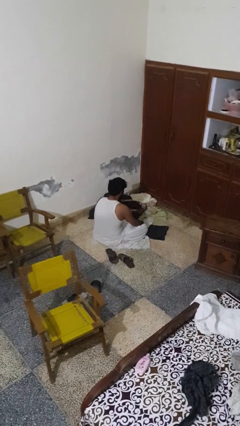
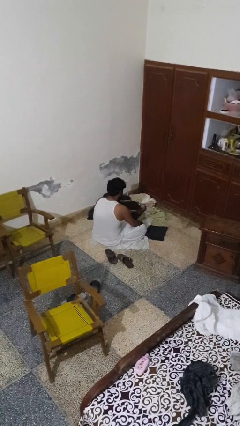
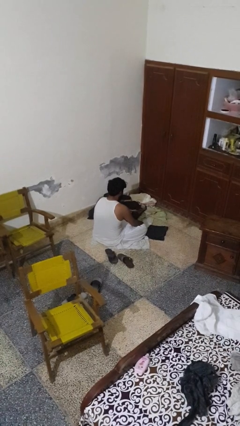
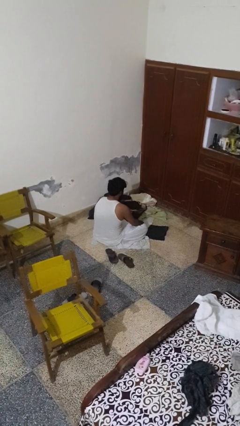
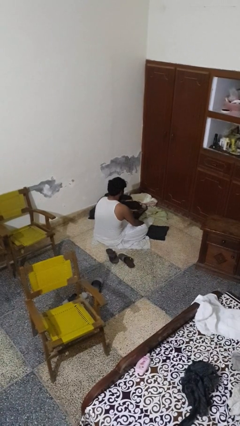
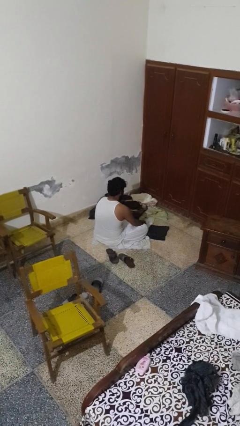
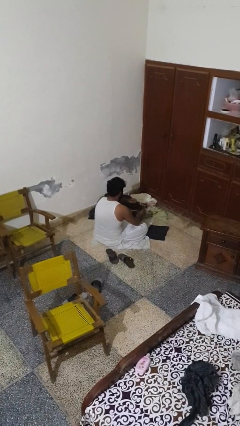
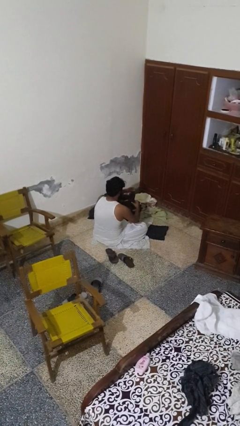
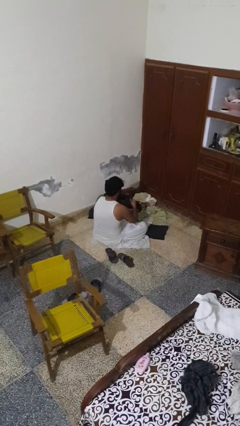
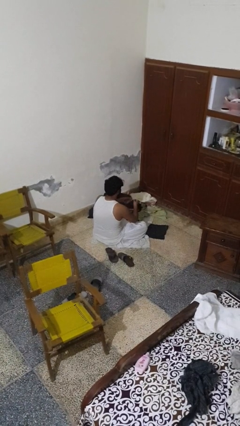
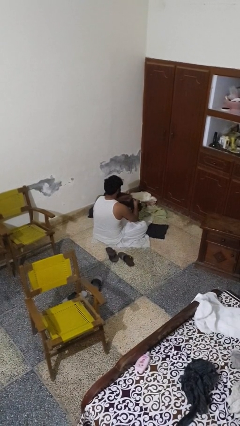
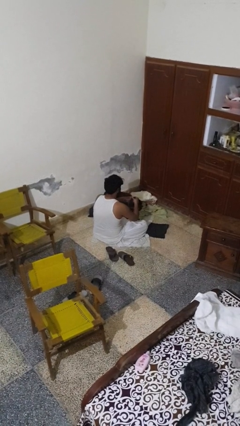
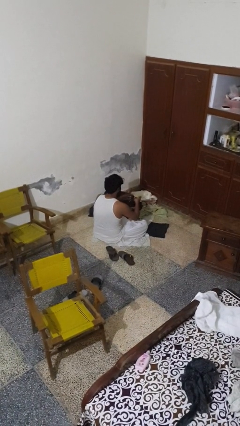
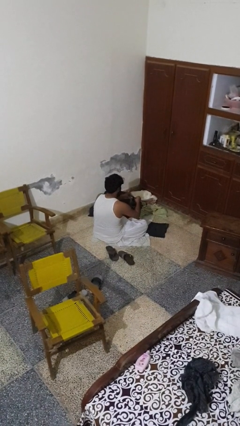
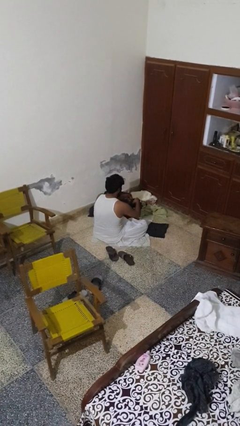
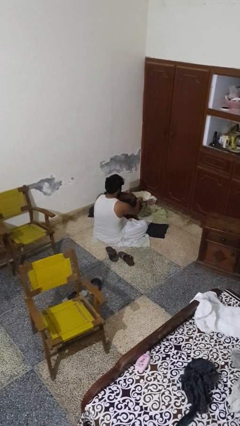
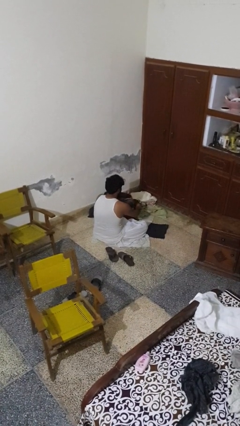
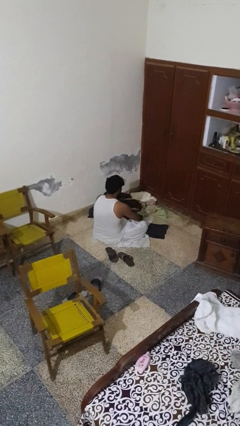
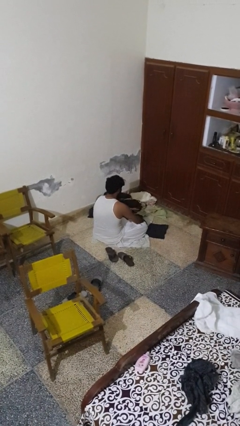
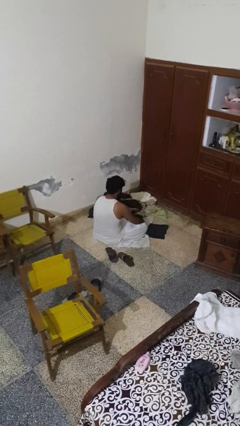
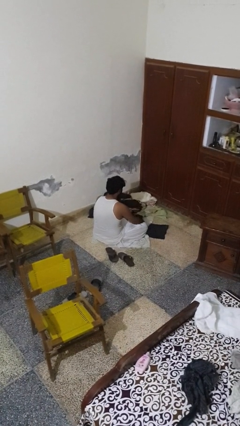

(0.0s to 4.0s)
person folds socks

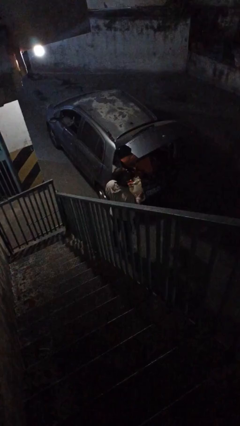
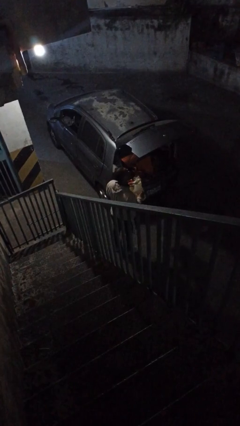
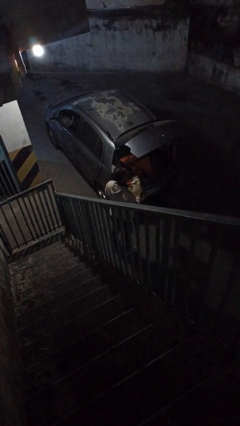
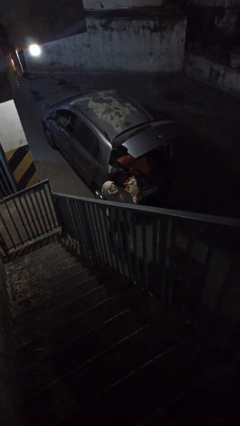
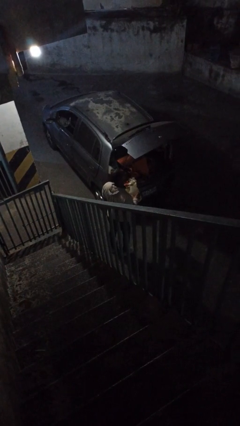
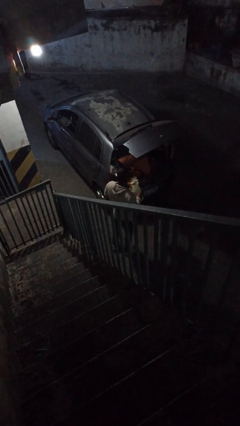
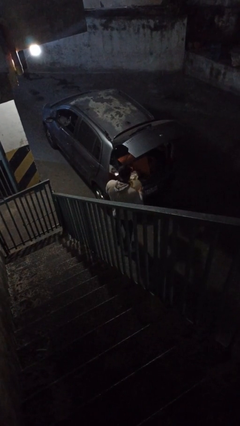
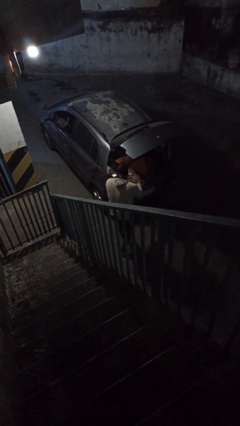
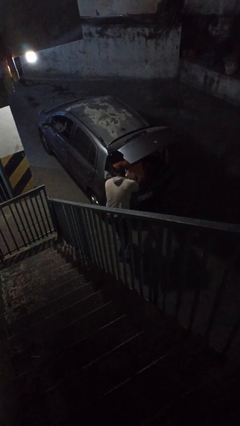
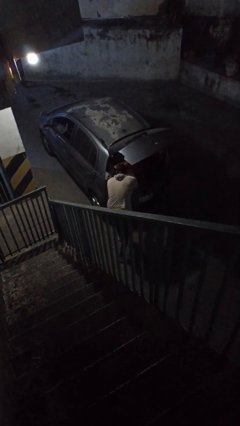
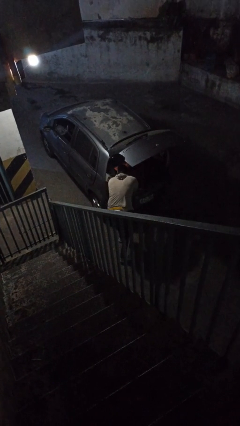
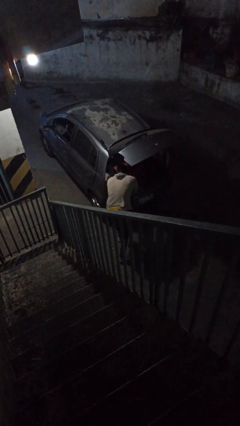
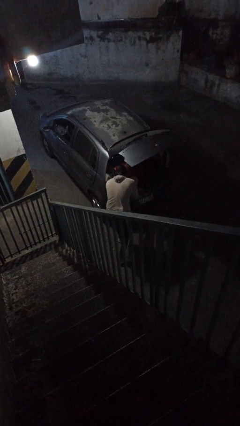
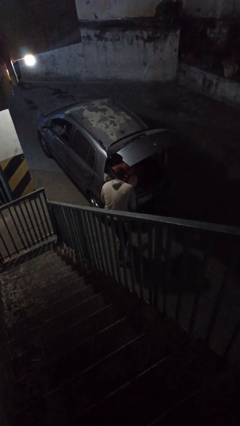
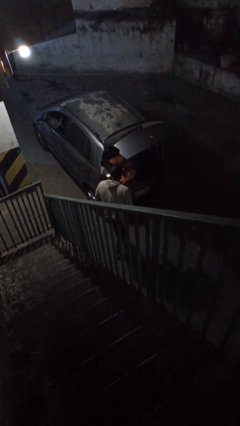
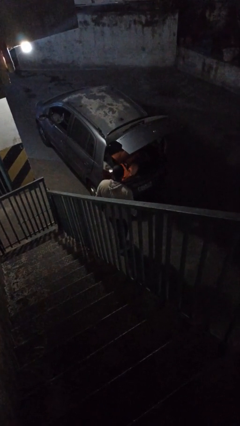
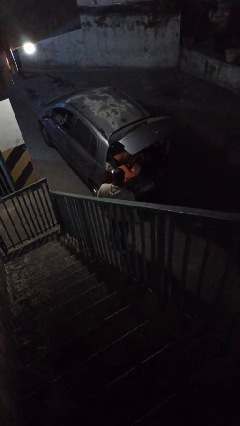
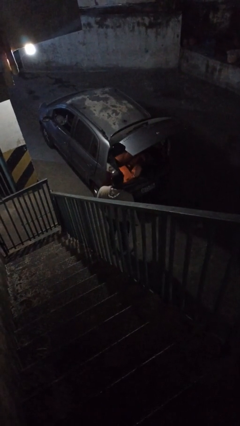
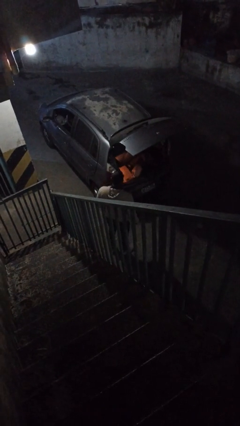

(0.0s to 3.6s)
person loads car

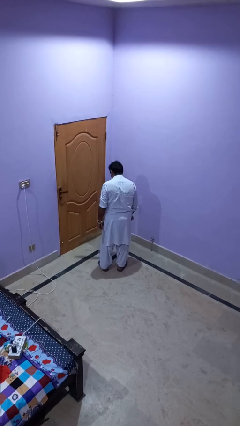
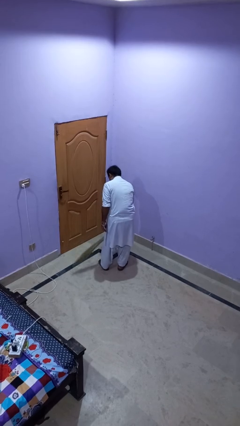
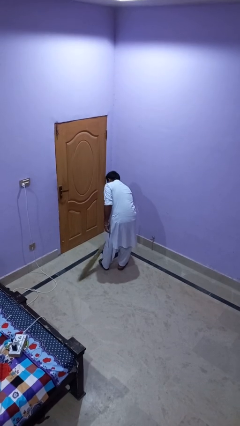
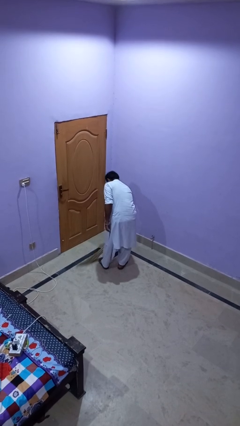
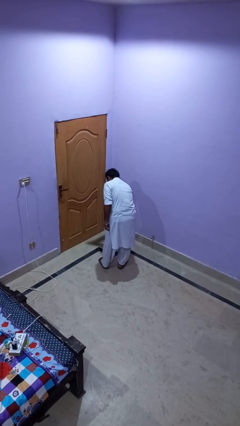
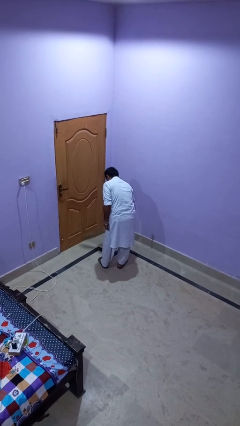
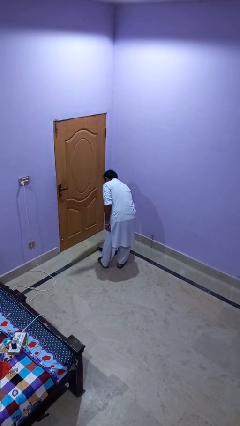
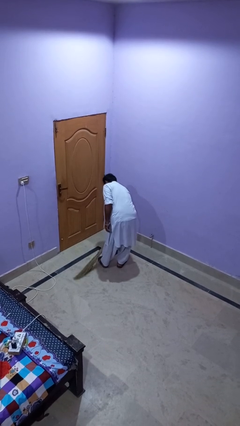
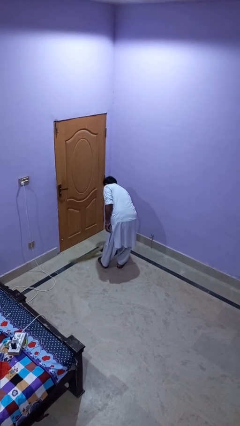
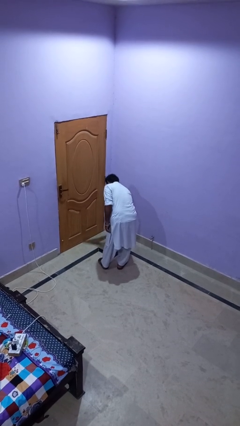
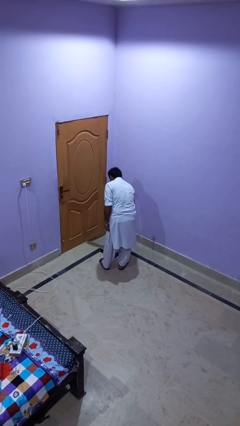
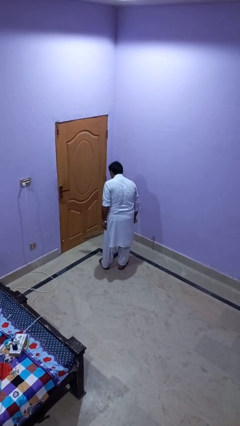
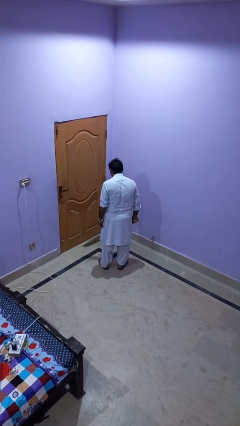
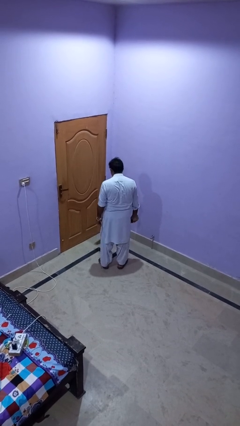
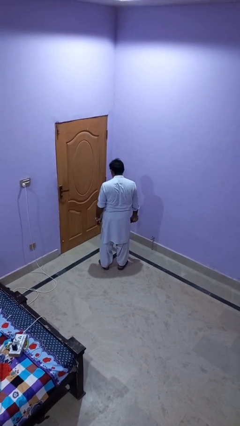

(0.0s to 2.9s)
person sweeps floor

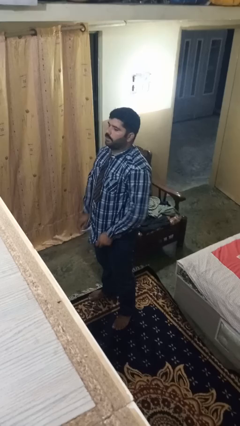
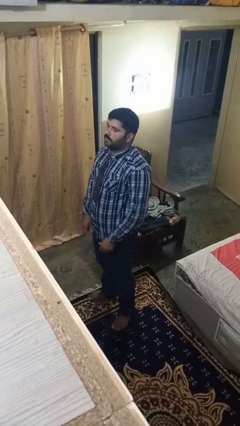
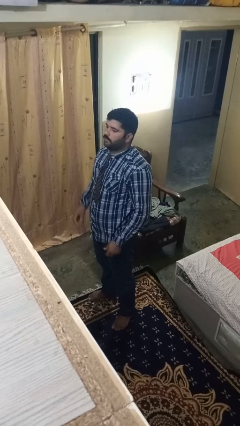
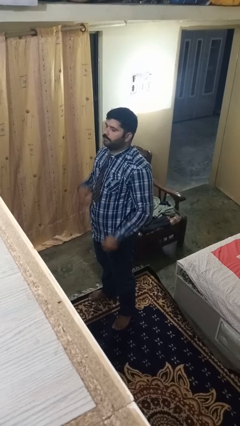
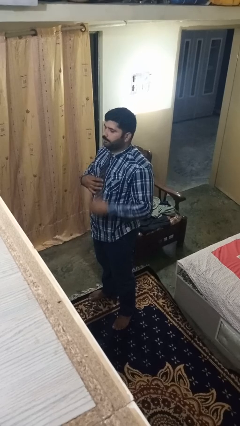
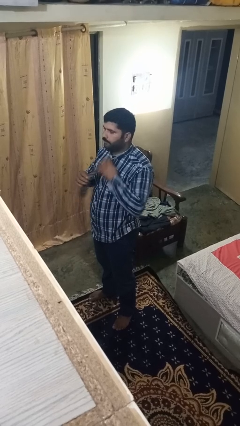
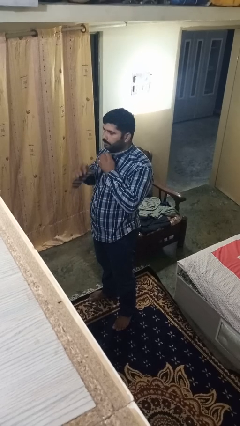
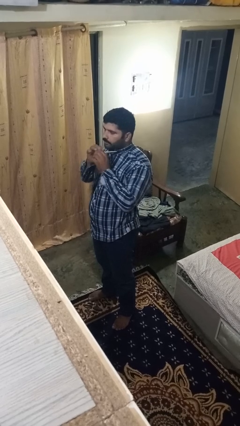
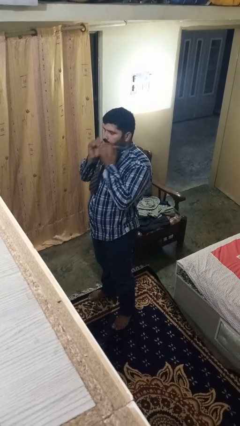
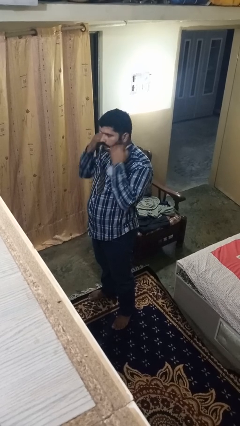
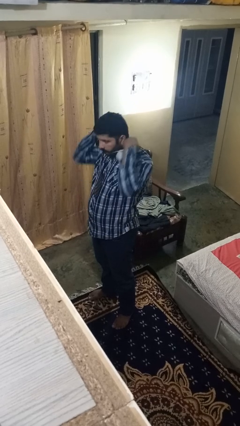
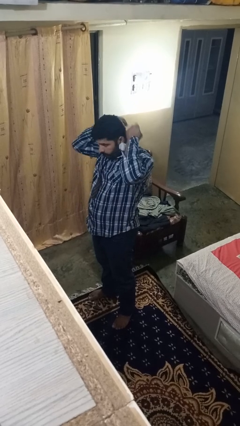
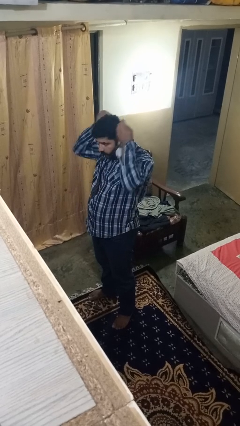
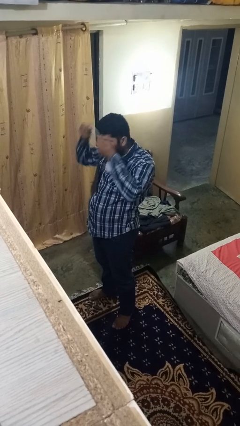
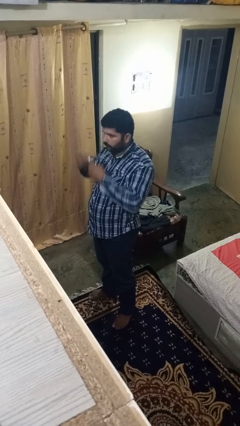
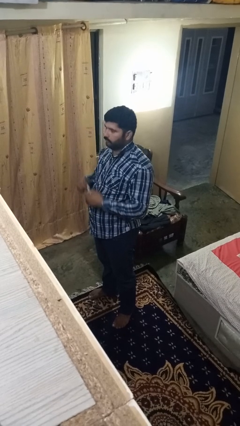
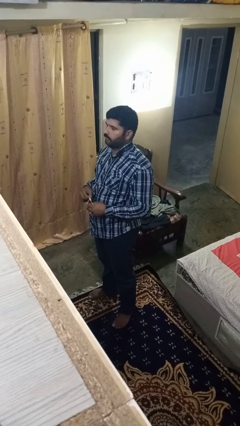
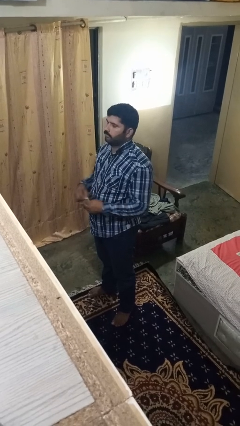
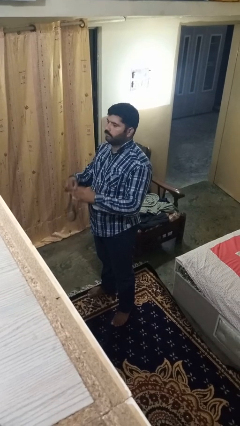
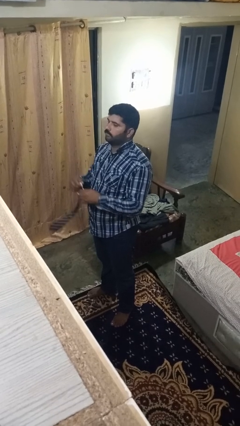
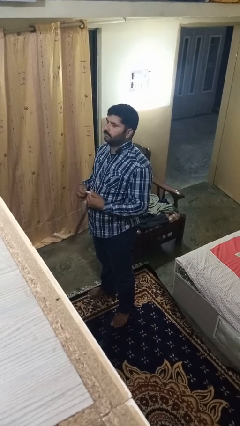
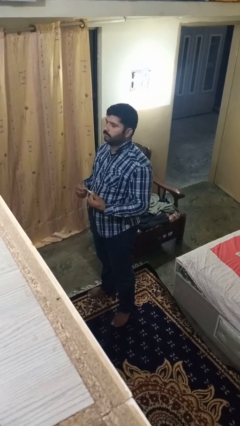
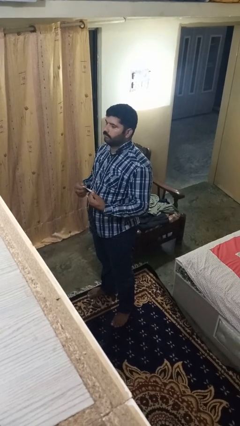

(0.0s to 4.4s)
person takes off necktie

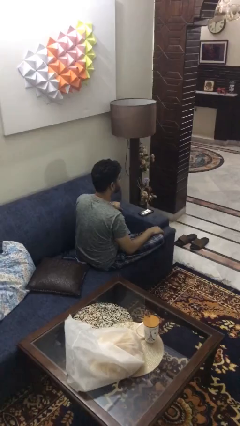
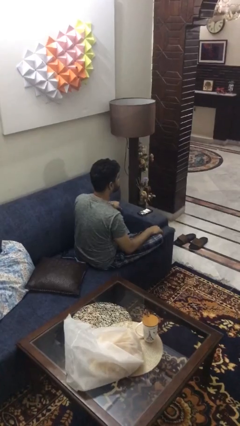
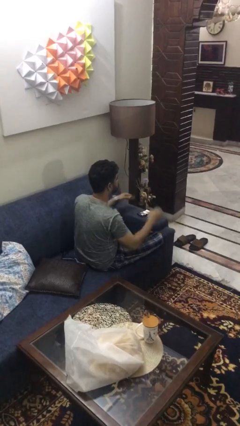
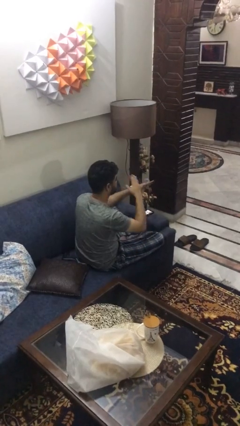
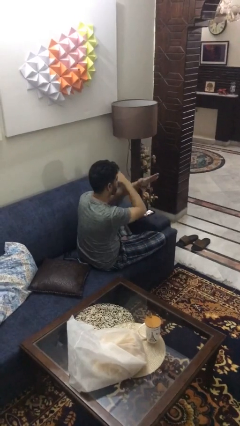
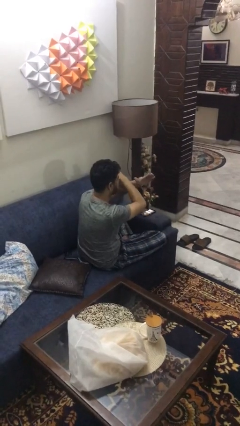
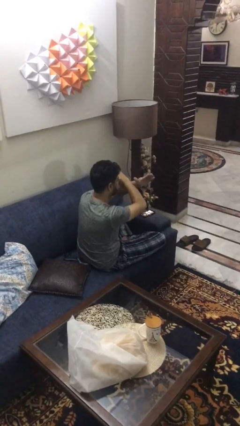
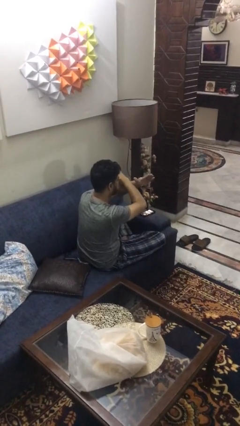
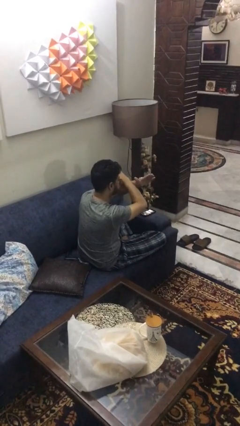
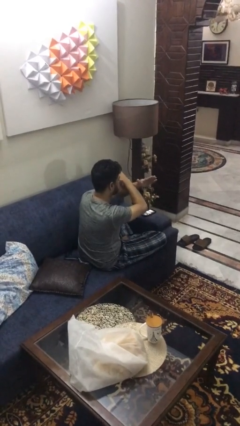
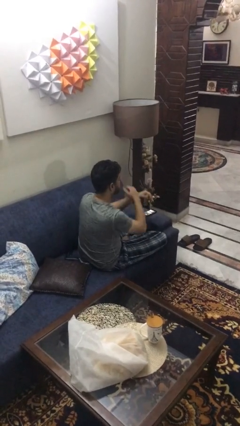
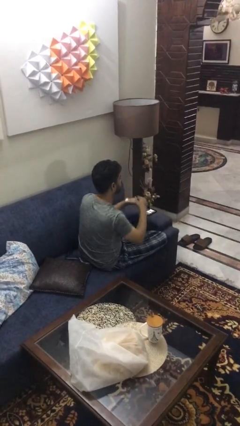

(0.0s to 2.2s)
person gestures arms x
